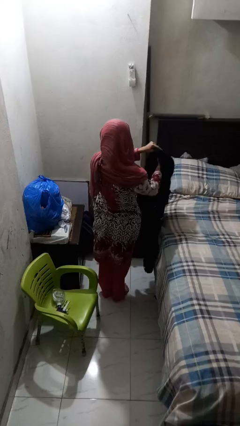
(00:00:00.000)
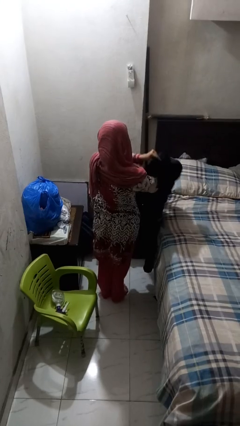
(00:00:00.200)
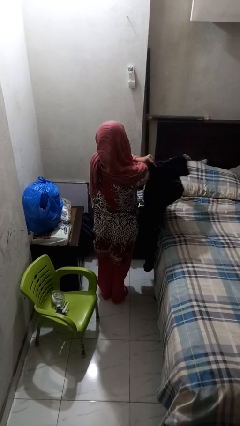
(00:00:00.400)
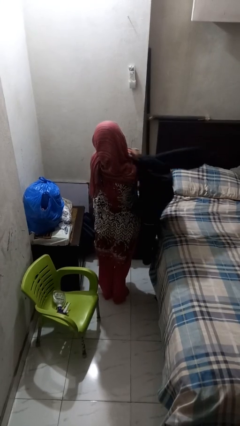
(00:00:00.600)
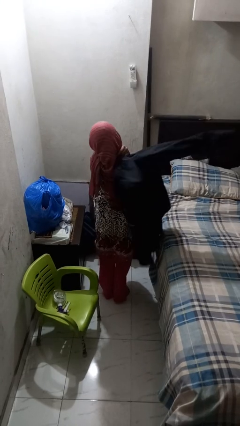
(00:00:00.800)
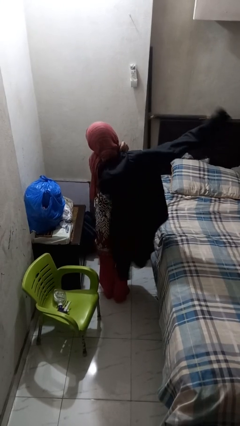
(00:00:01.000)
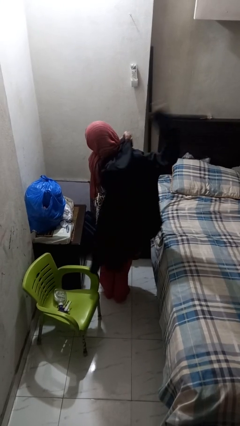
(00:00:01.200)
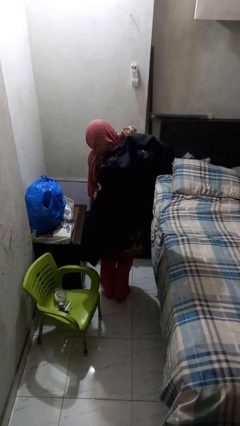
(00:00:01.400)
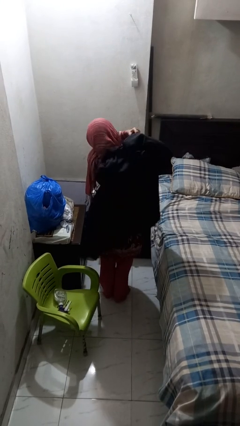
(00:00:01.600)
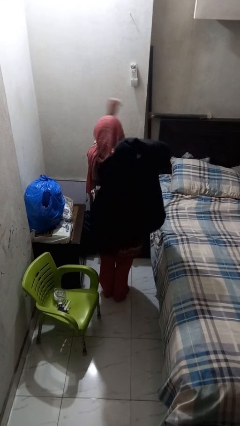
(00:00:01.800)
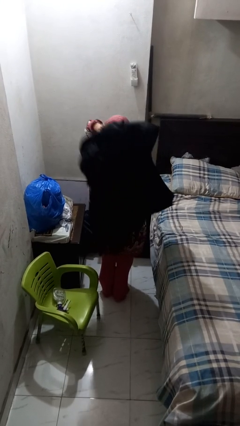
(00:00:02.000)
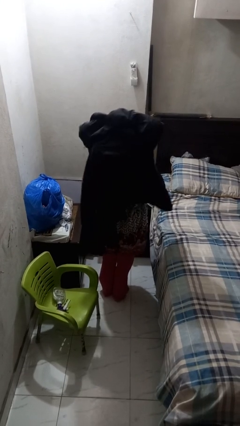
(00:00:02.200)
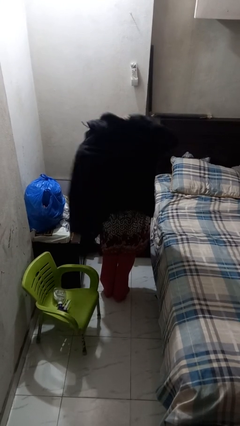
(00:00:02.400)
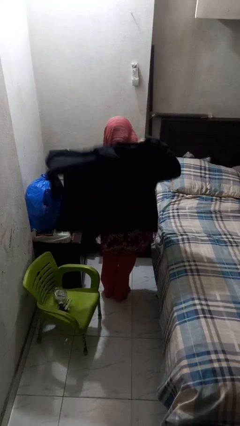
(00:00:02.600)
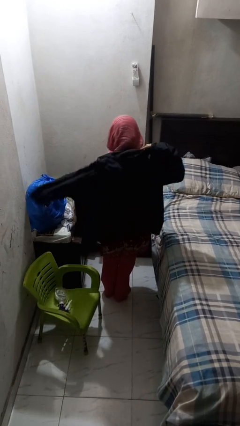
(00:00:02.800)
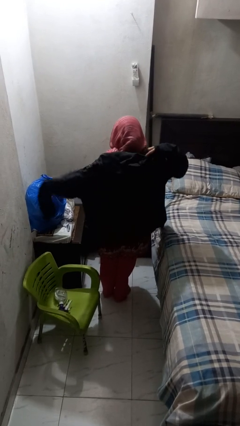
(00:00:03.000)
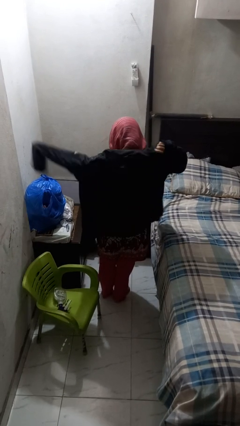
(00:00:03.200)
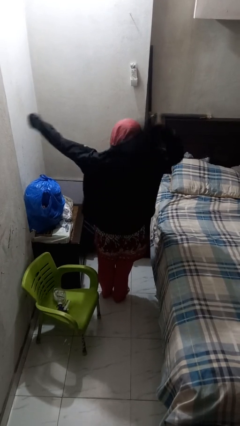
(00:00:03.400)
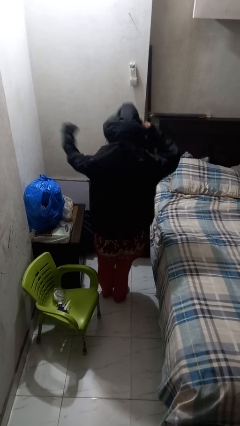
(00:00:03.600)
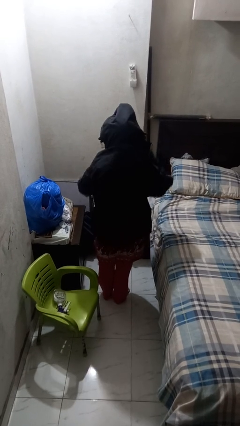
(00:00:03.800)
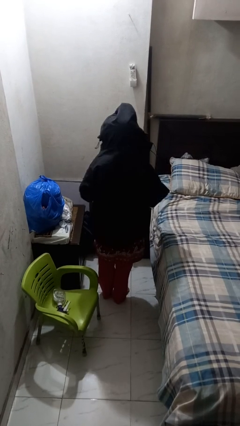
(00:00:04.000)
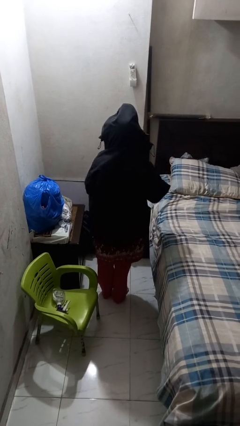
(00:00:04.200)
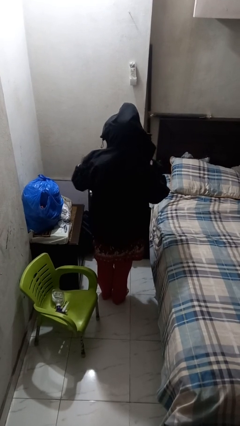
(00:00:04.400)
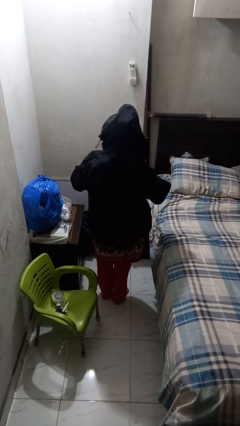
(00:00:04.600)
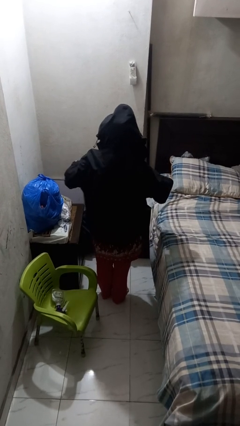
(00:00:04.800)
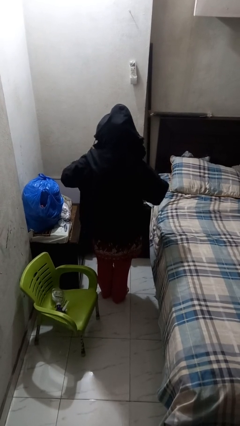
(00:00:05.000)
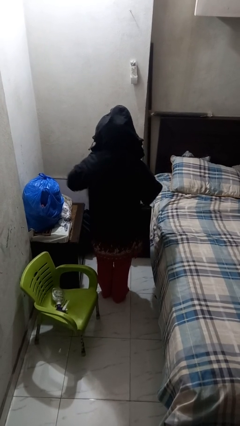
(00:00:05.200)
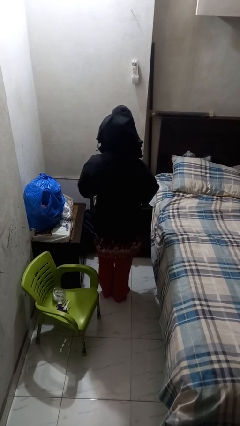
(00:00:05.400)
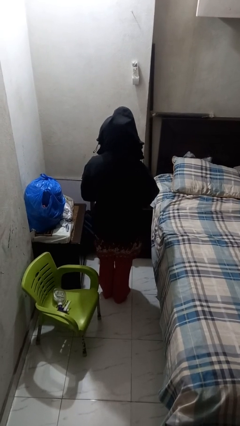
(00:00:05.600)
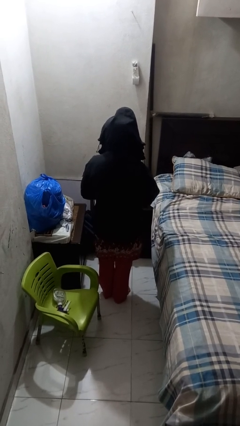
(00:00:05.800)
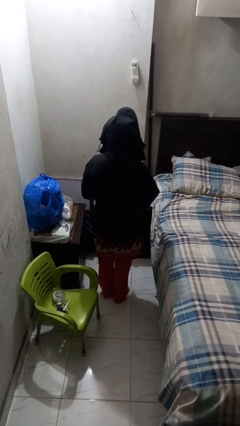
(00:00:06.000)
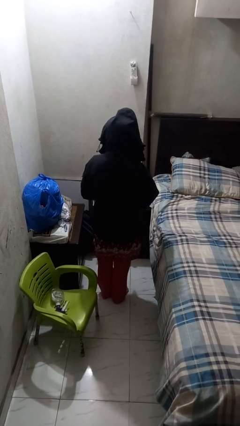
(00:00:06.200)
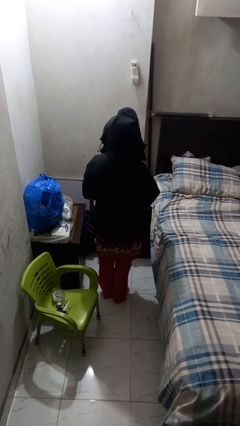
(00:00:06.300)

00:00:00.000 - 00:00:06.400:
person puts on hoodie

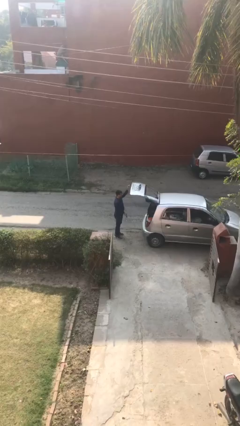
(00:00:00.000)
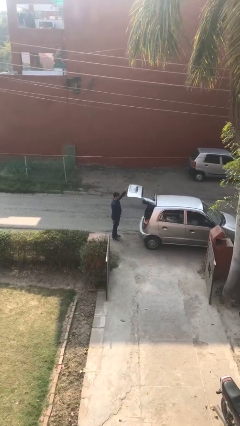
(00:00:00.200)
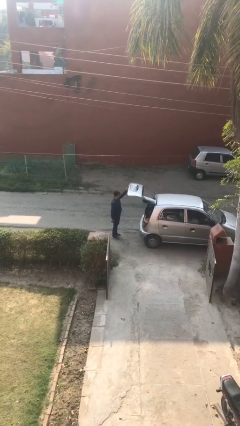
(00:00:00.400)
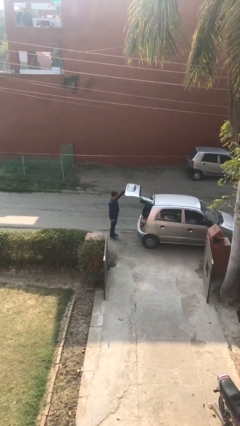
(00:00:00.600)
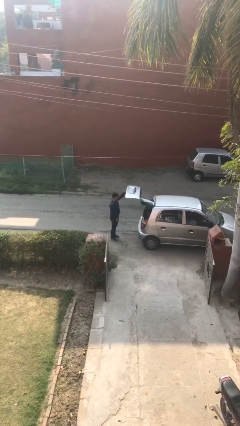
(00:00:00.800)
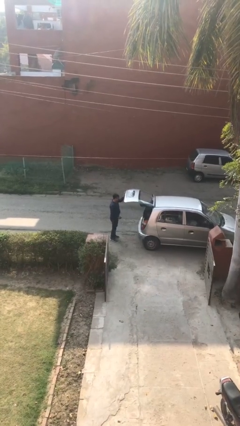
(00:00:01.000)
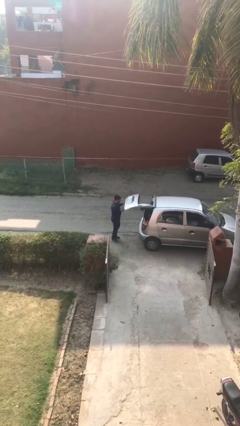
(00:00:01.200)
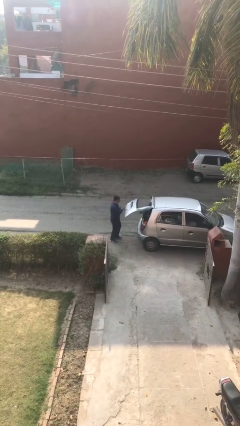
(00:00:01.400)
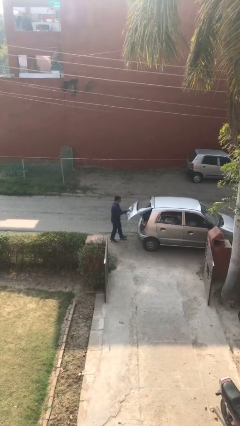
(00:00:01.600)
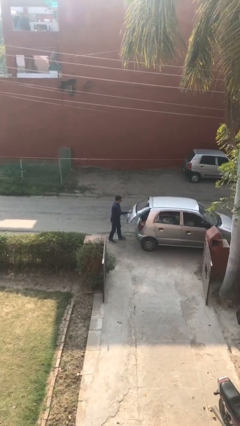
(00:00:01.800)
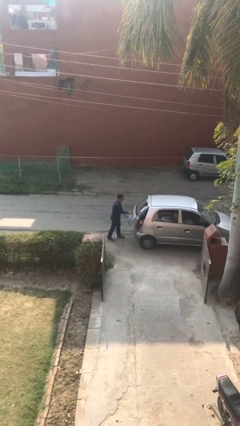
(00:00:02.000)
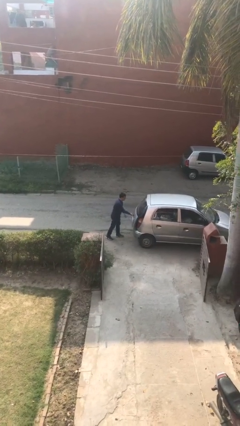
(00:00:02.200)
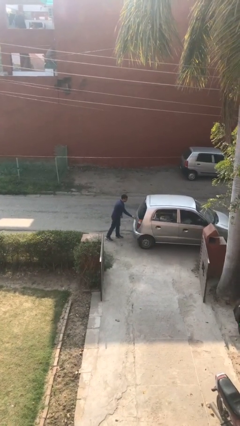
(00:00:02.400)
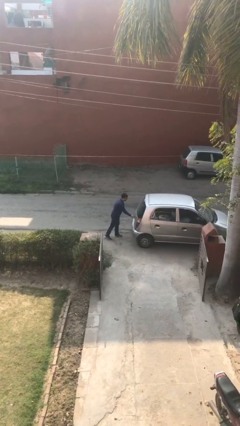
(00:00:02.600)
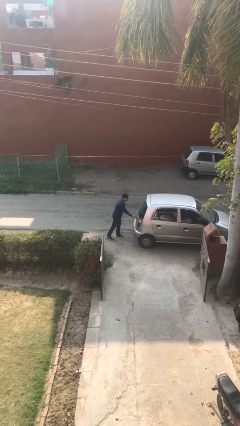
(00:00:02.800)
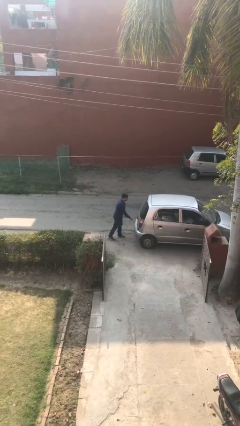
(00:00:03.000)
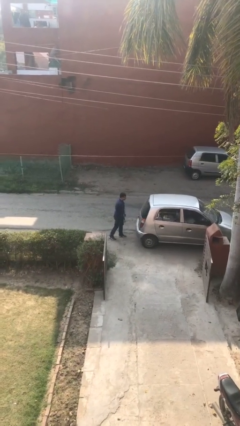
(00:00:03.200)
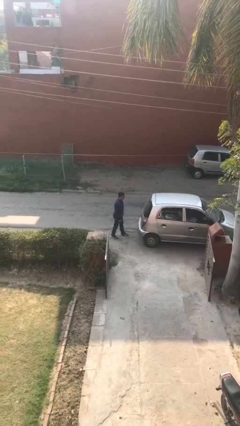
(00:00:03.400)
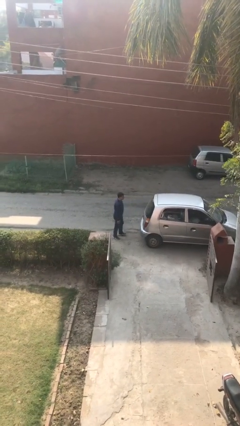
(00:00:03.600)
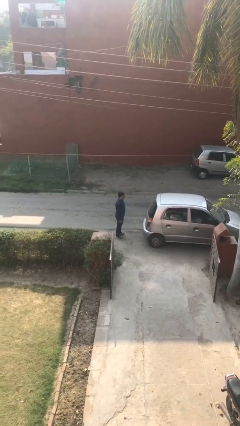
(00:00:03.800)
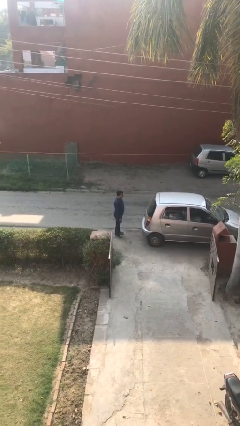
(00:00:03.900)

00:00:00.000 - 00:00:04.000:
person closes car trunk

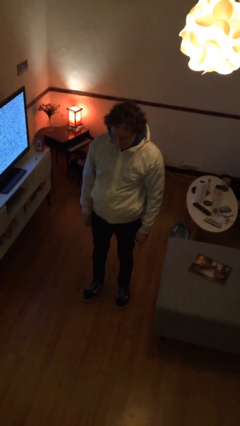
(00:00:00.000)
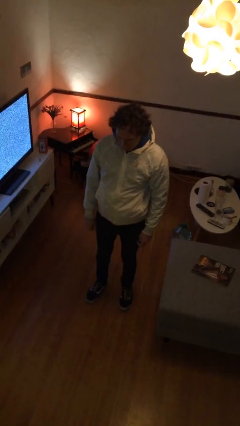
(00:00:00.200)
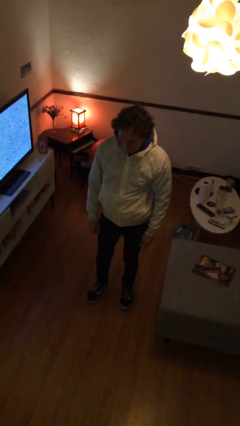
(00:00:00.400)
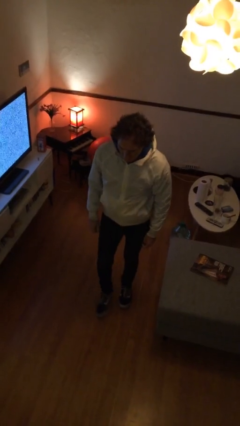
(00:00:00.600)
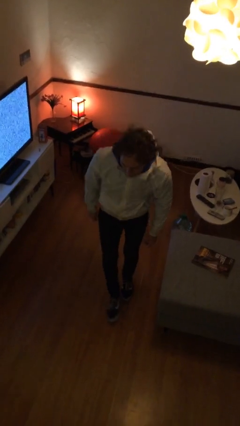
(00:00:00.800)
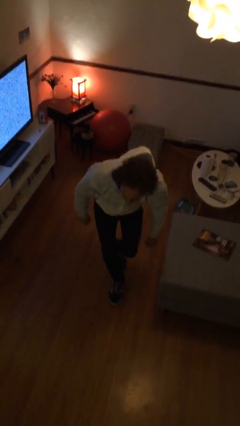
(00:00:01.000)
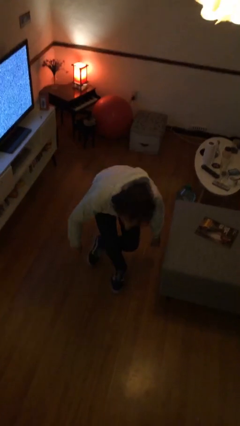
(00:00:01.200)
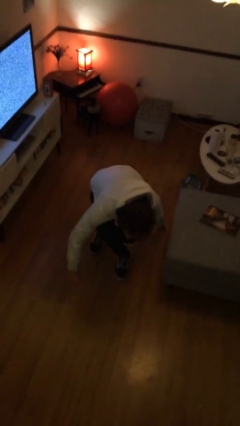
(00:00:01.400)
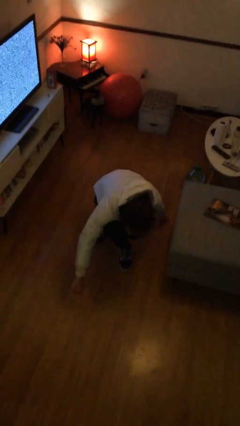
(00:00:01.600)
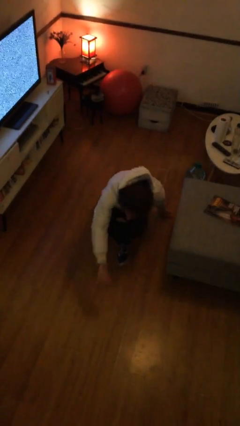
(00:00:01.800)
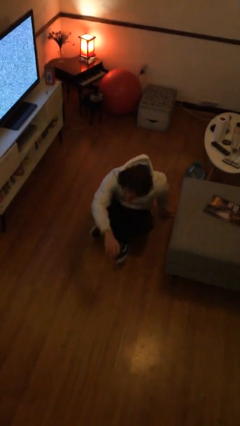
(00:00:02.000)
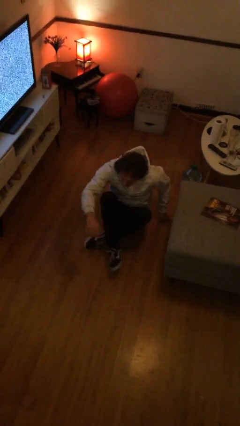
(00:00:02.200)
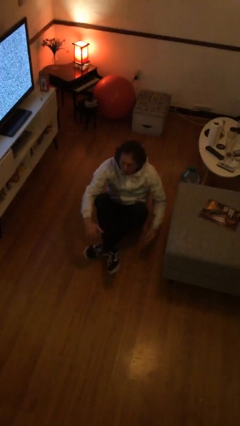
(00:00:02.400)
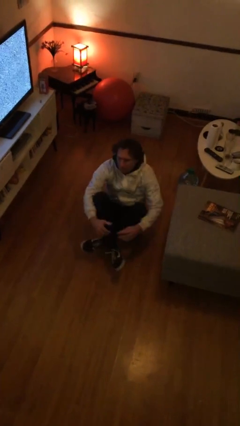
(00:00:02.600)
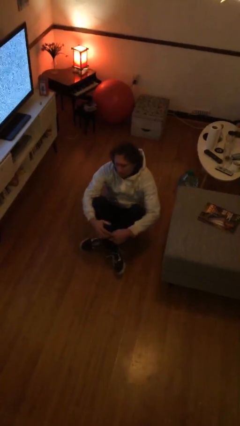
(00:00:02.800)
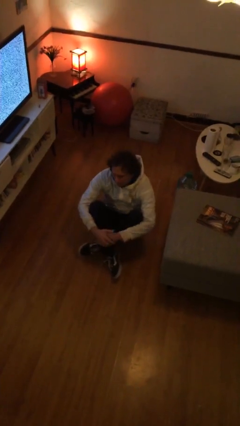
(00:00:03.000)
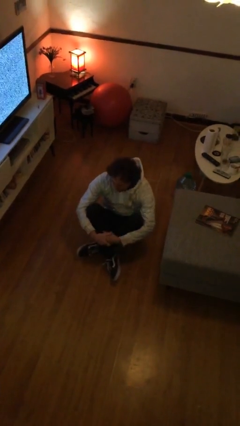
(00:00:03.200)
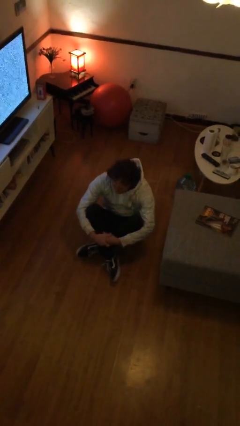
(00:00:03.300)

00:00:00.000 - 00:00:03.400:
person sits crisscross

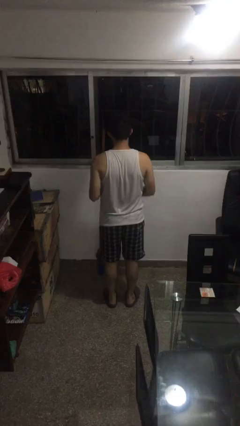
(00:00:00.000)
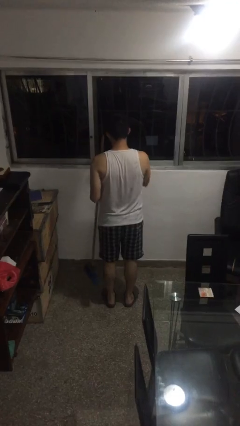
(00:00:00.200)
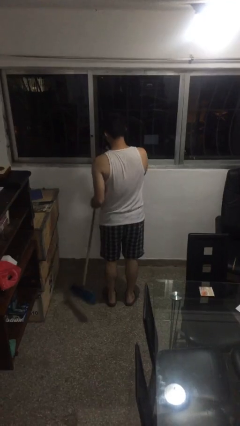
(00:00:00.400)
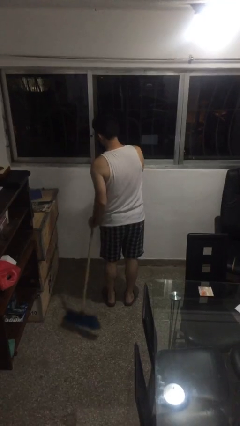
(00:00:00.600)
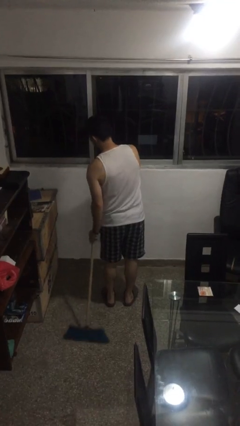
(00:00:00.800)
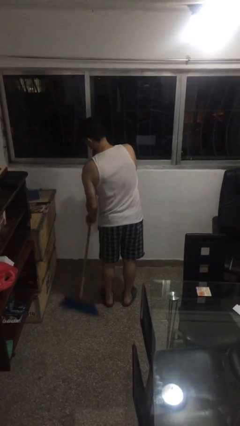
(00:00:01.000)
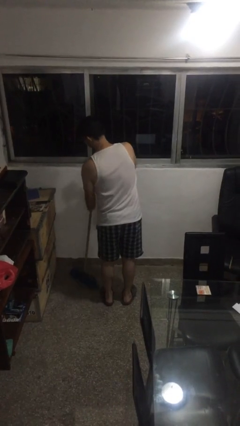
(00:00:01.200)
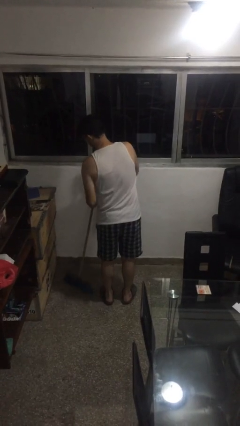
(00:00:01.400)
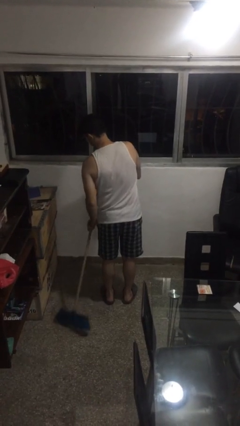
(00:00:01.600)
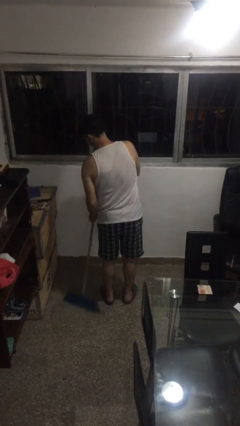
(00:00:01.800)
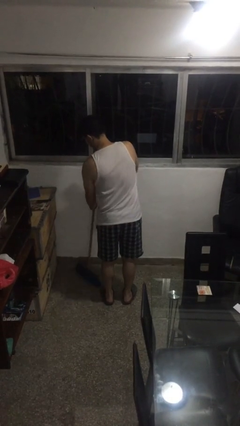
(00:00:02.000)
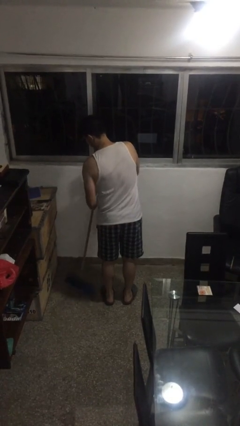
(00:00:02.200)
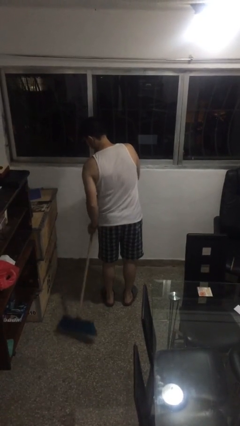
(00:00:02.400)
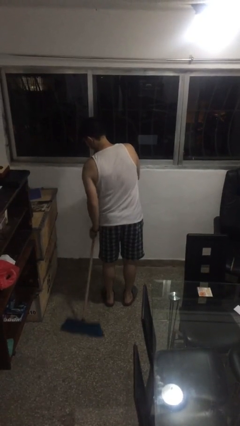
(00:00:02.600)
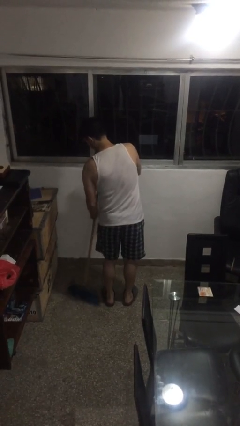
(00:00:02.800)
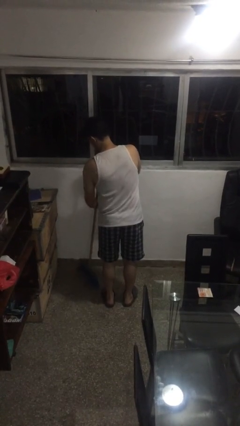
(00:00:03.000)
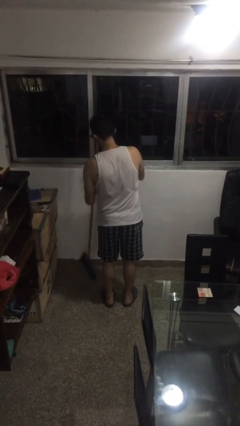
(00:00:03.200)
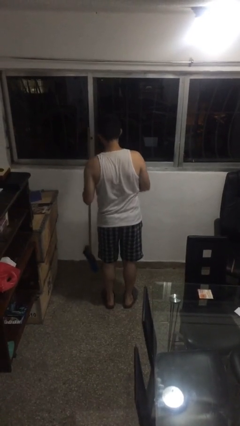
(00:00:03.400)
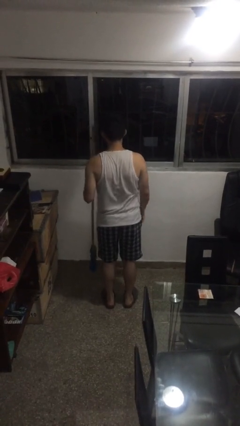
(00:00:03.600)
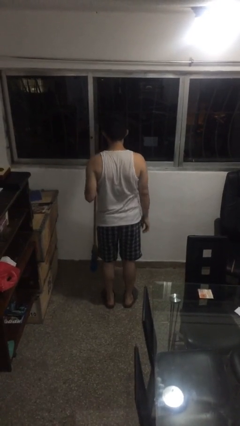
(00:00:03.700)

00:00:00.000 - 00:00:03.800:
person sweeps floor

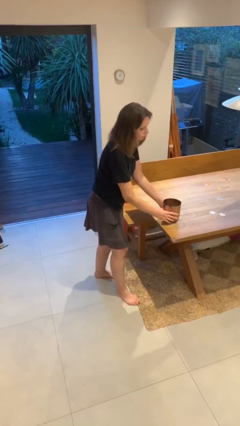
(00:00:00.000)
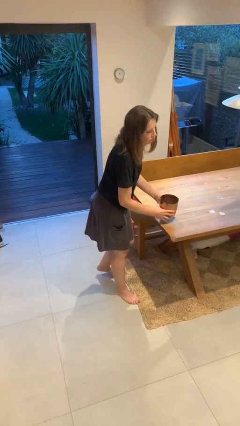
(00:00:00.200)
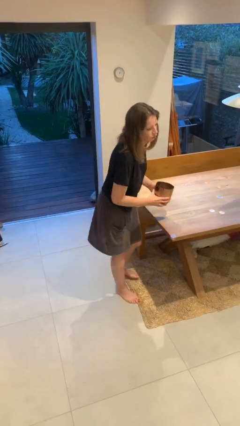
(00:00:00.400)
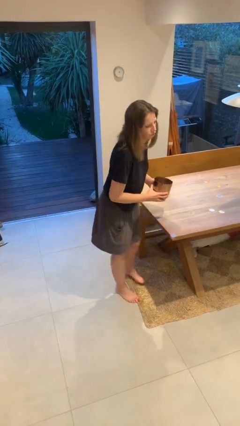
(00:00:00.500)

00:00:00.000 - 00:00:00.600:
person picks up object from table
